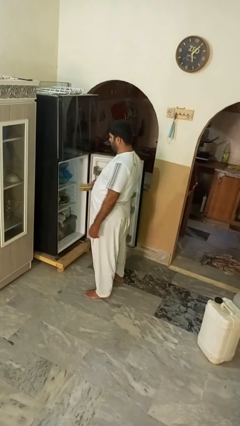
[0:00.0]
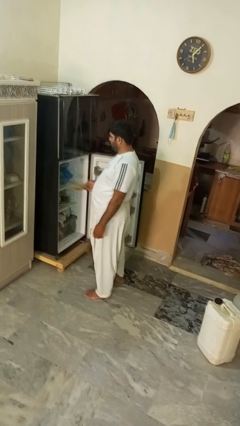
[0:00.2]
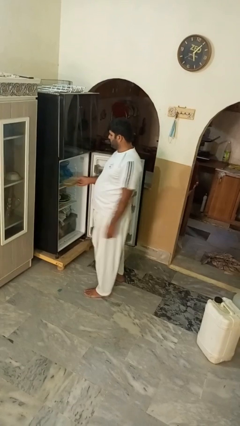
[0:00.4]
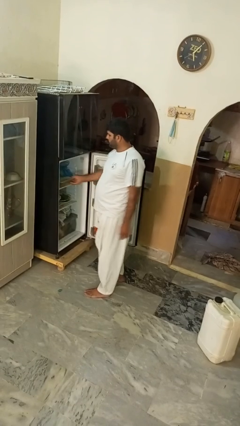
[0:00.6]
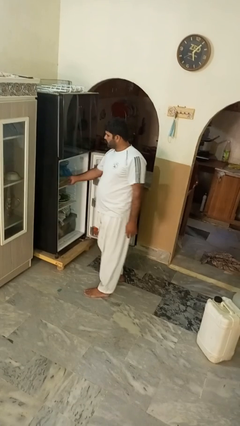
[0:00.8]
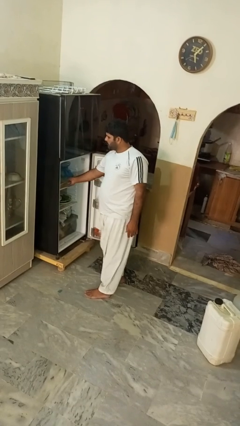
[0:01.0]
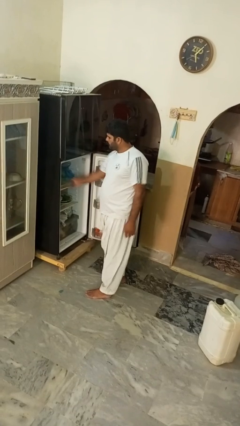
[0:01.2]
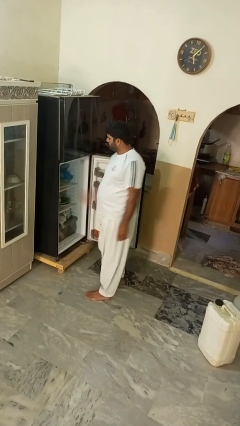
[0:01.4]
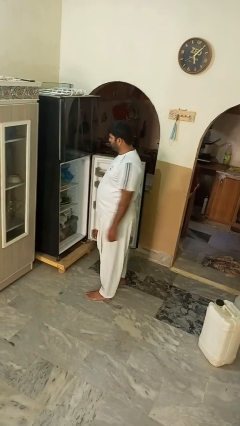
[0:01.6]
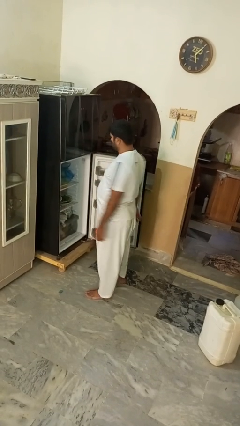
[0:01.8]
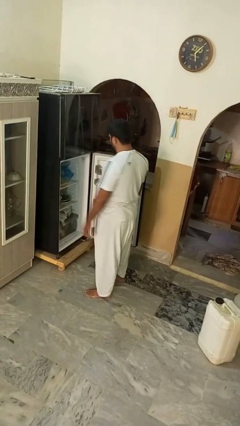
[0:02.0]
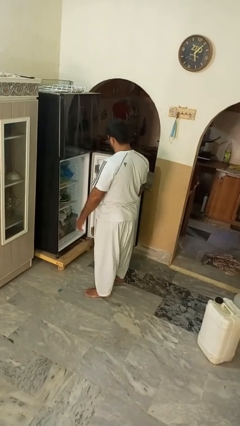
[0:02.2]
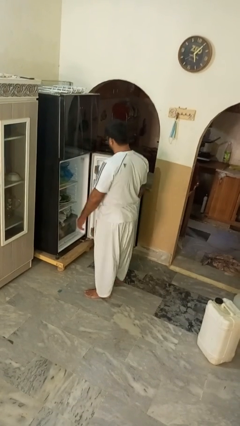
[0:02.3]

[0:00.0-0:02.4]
person puts object into refrigerator

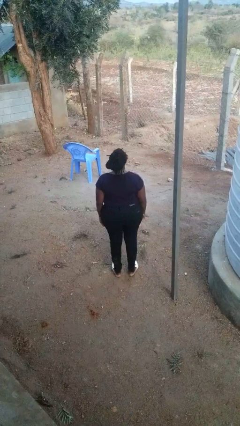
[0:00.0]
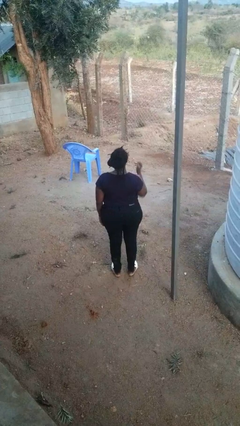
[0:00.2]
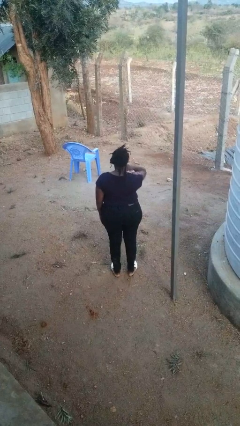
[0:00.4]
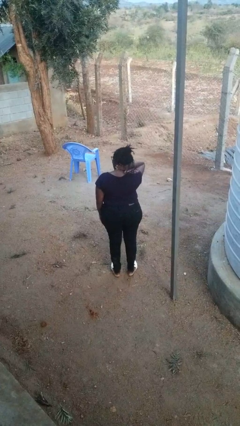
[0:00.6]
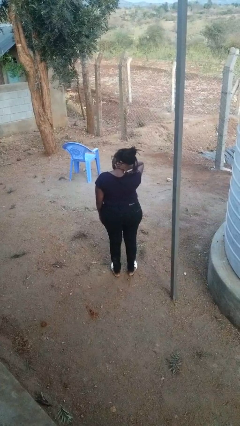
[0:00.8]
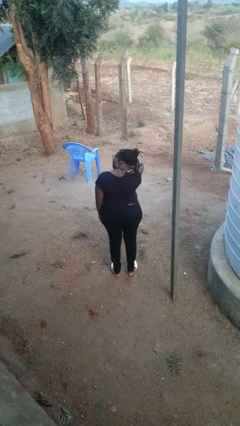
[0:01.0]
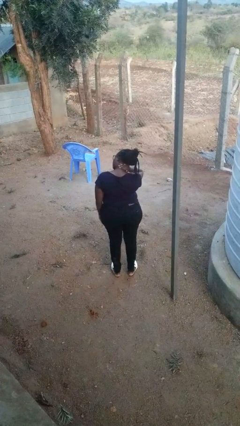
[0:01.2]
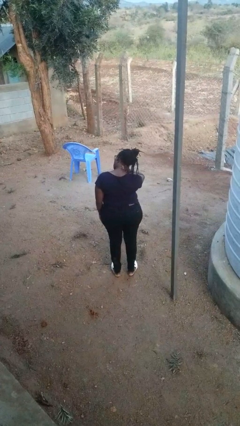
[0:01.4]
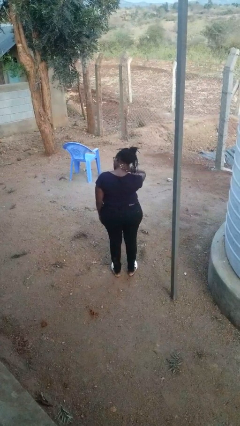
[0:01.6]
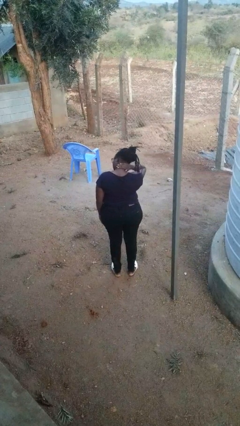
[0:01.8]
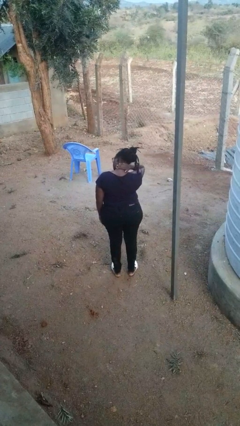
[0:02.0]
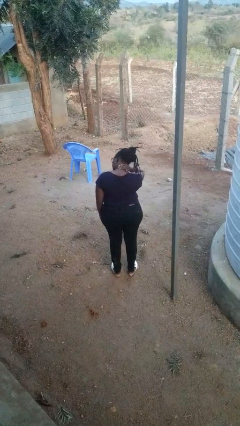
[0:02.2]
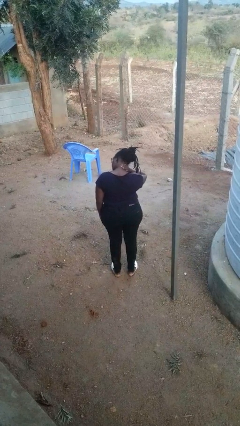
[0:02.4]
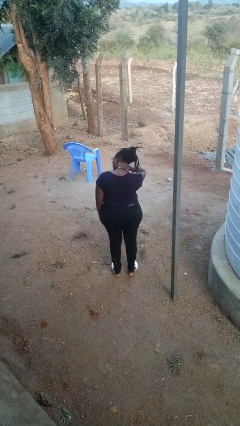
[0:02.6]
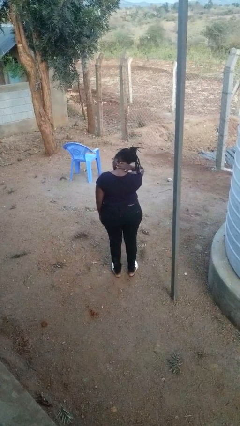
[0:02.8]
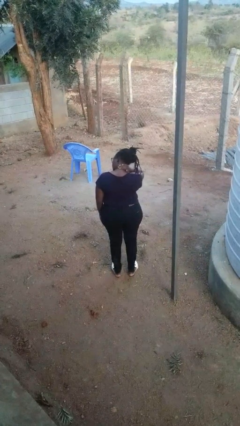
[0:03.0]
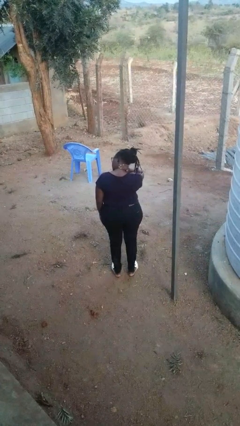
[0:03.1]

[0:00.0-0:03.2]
person rubs neck

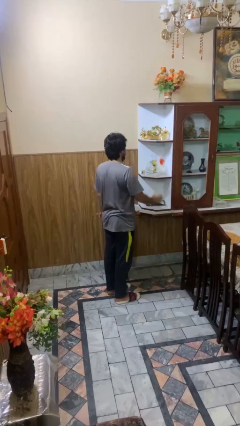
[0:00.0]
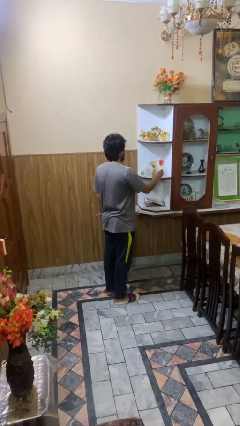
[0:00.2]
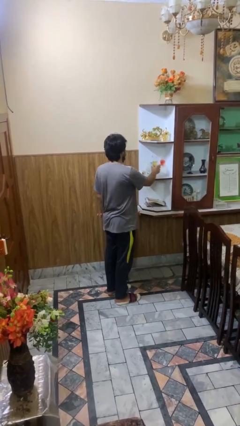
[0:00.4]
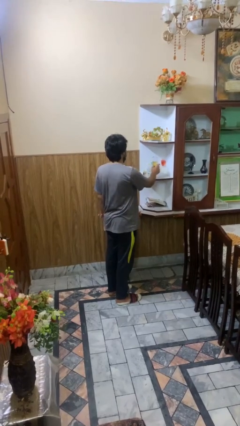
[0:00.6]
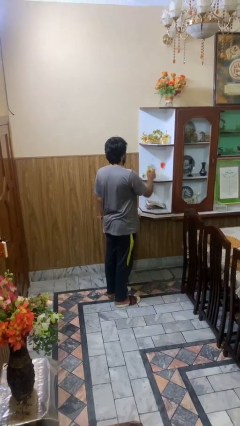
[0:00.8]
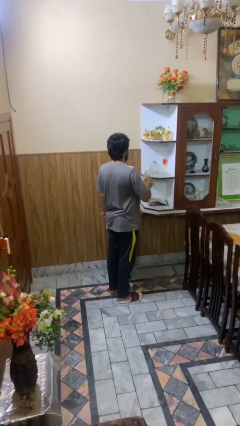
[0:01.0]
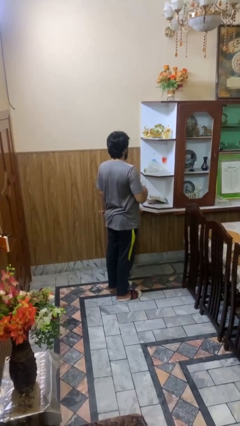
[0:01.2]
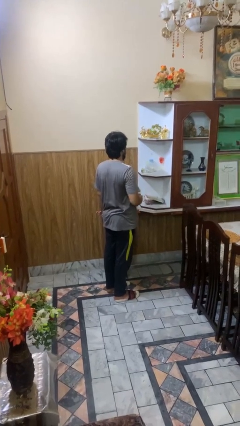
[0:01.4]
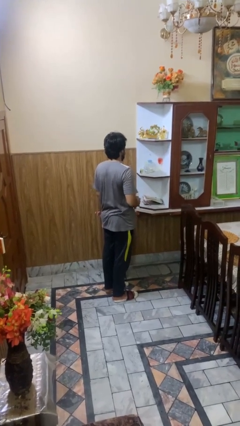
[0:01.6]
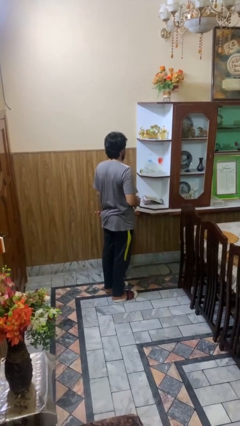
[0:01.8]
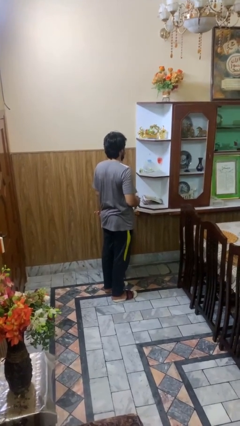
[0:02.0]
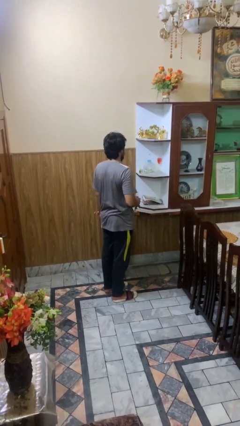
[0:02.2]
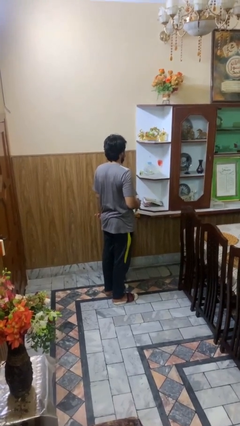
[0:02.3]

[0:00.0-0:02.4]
person picks up object from cabinet

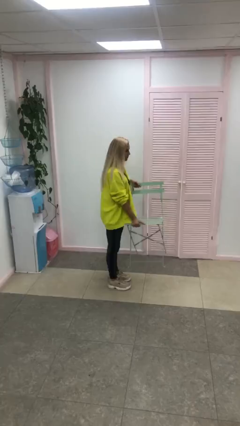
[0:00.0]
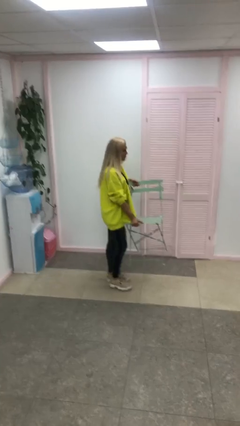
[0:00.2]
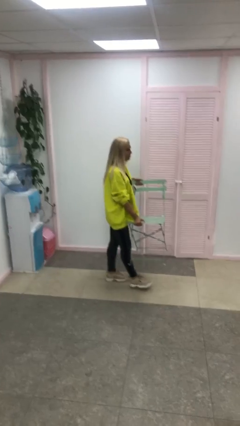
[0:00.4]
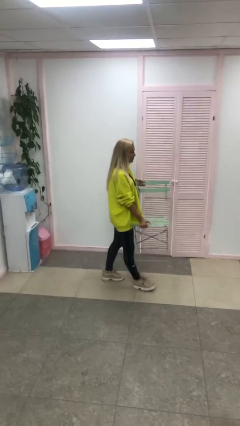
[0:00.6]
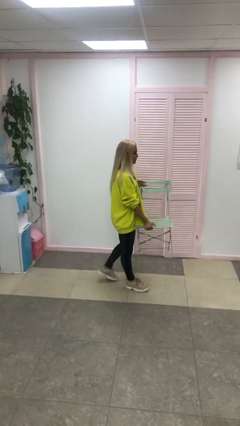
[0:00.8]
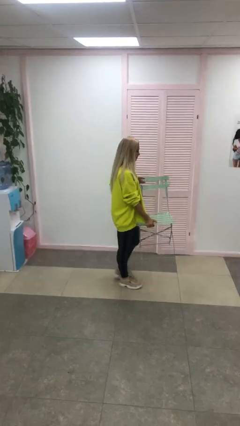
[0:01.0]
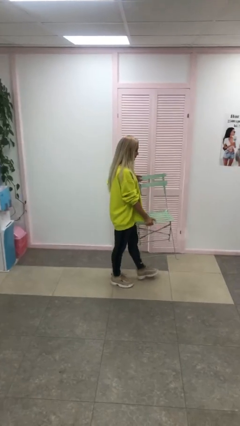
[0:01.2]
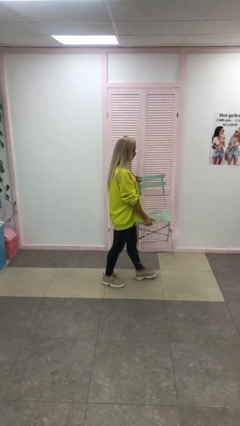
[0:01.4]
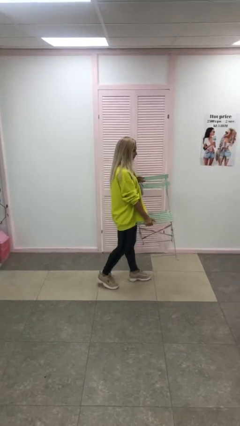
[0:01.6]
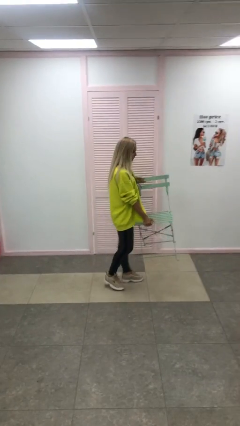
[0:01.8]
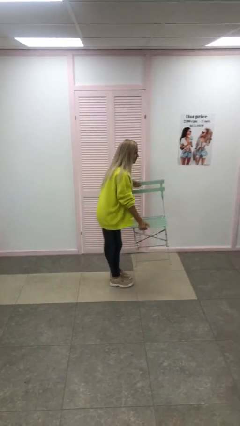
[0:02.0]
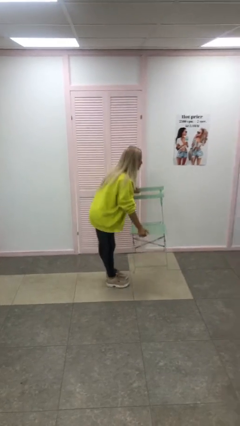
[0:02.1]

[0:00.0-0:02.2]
person carries heavy object

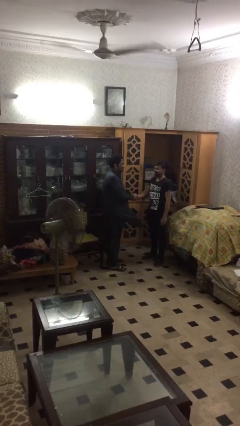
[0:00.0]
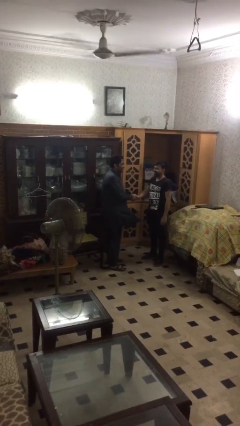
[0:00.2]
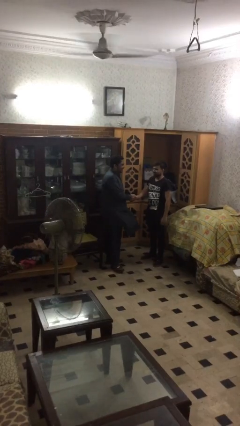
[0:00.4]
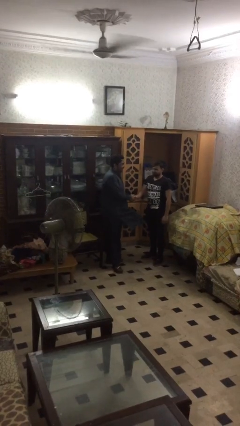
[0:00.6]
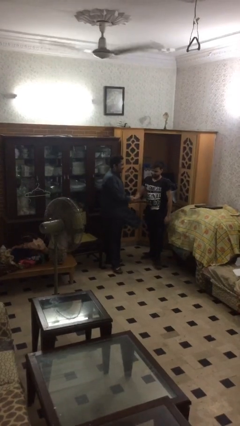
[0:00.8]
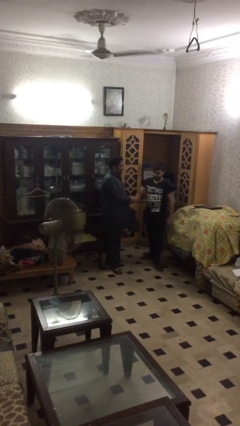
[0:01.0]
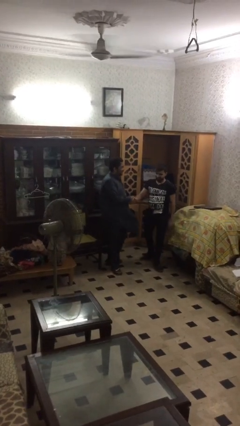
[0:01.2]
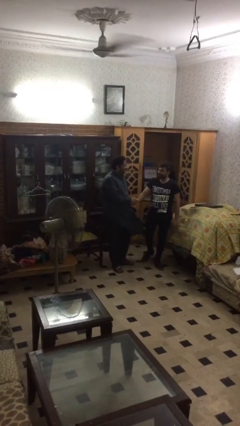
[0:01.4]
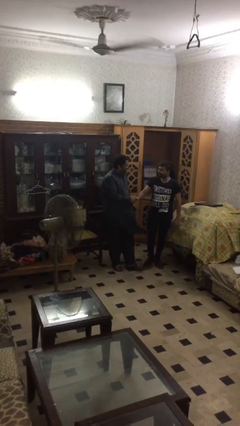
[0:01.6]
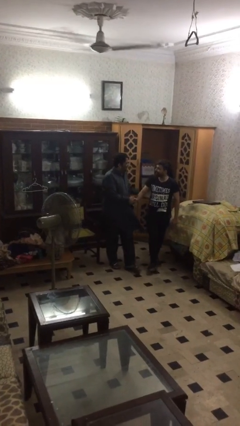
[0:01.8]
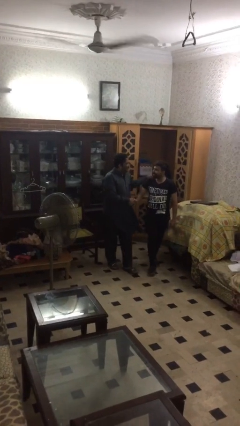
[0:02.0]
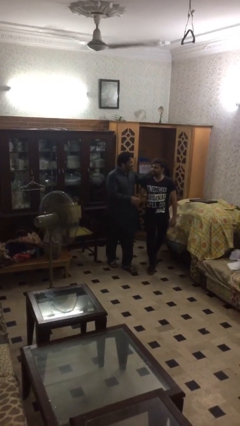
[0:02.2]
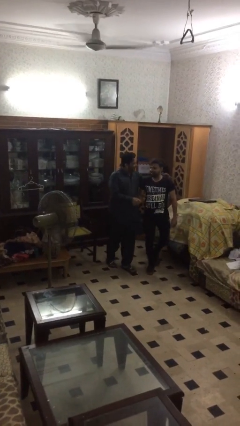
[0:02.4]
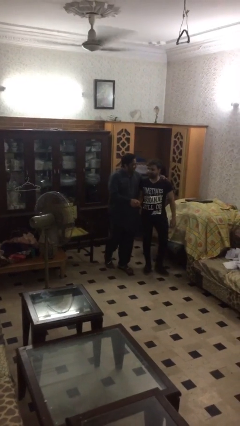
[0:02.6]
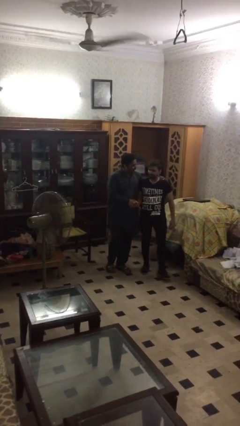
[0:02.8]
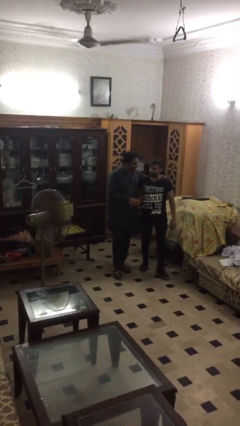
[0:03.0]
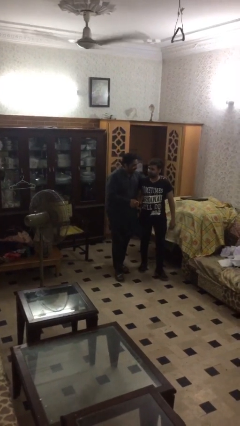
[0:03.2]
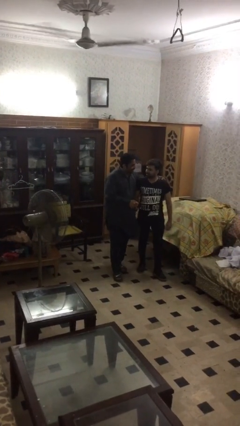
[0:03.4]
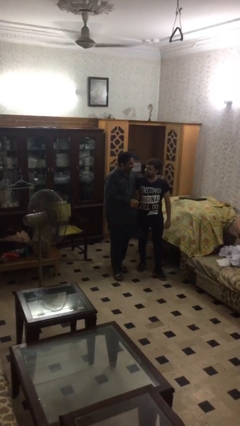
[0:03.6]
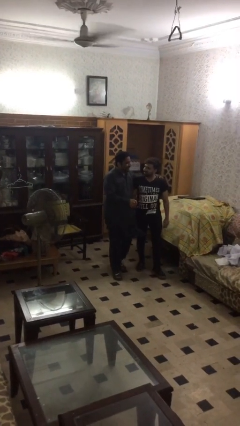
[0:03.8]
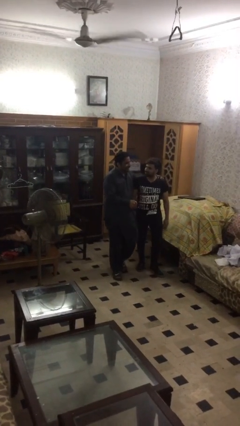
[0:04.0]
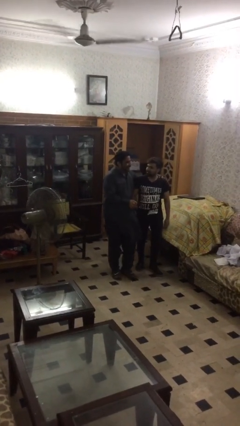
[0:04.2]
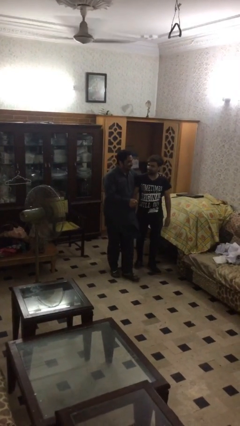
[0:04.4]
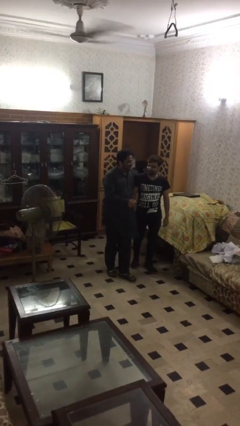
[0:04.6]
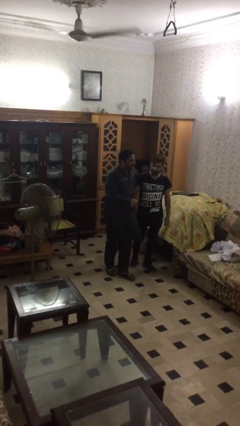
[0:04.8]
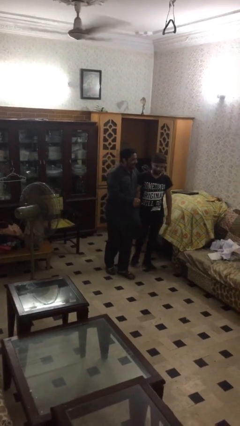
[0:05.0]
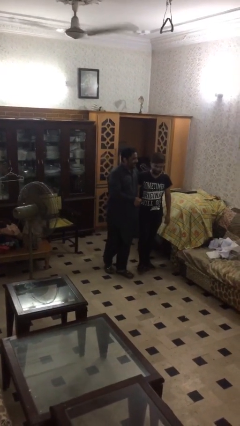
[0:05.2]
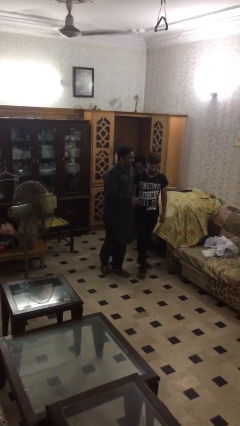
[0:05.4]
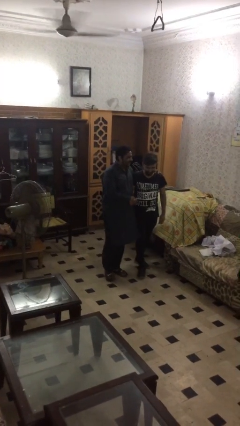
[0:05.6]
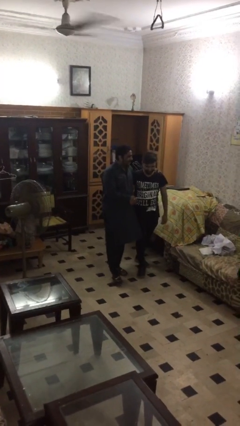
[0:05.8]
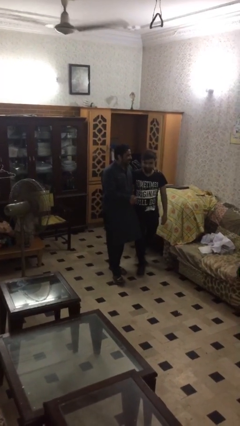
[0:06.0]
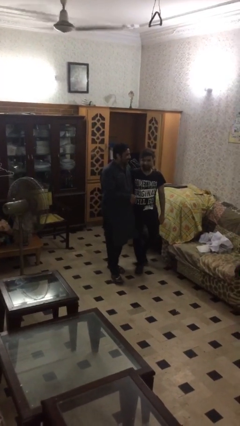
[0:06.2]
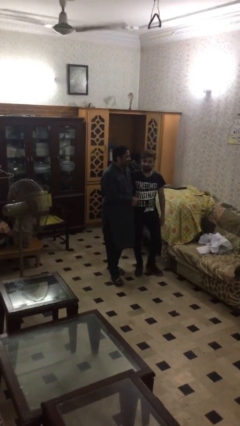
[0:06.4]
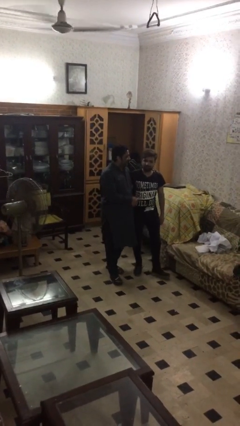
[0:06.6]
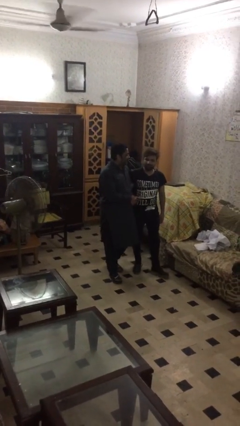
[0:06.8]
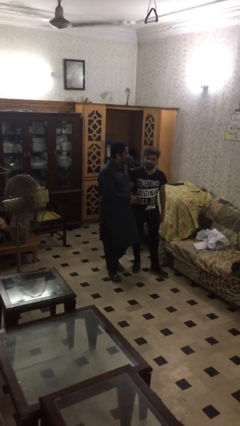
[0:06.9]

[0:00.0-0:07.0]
person talks to person
